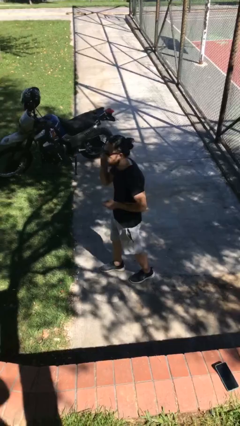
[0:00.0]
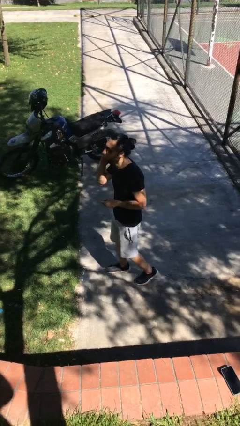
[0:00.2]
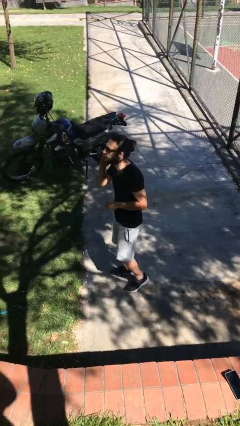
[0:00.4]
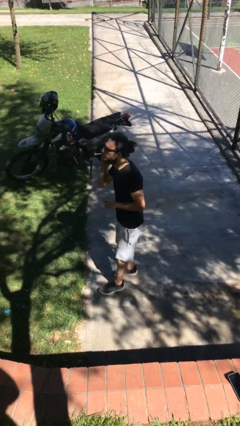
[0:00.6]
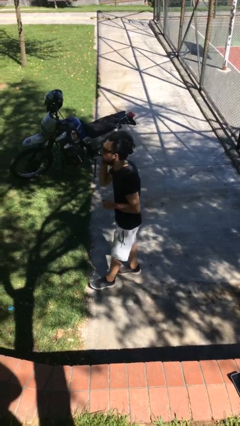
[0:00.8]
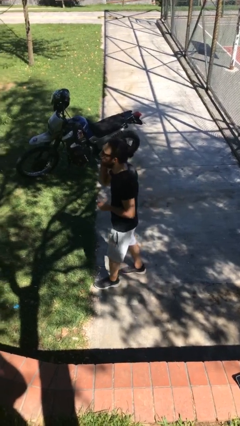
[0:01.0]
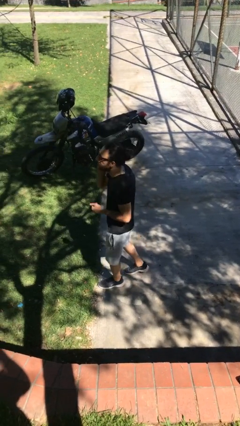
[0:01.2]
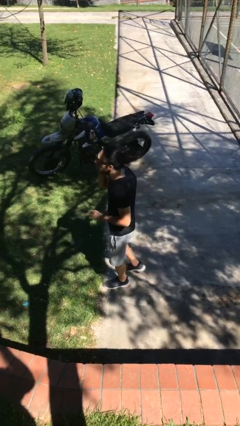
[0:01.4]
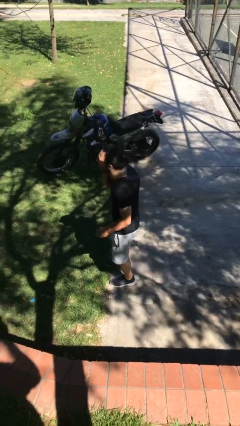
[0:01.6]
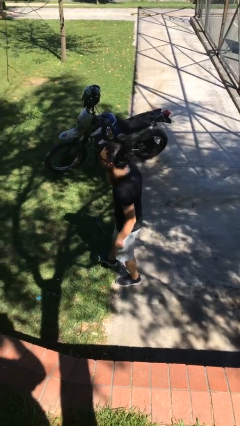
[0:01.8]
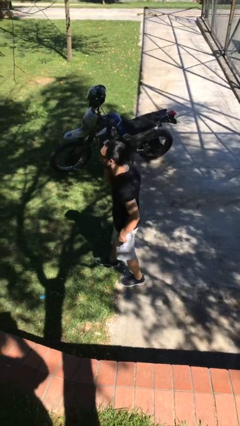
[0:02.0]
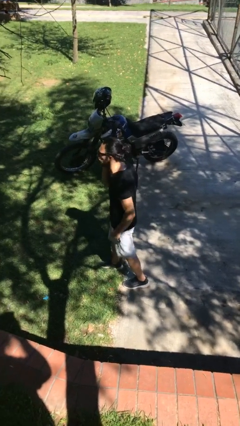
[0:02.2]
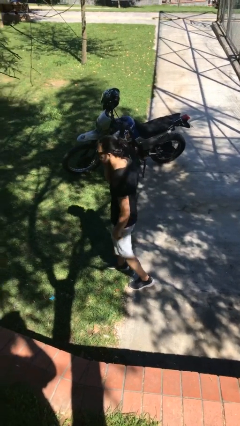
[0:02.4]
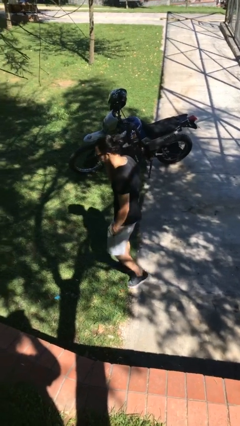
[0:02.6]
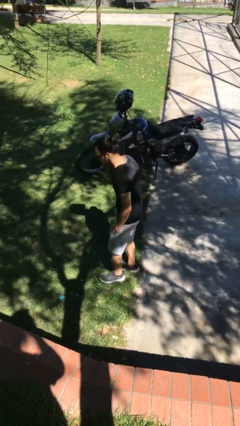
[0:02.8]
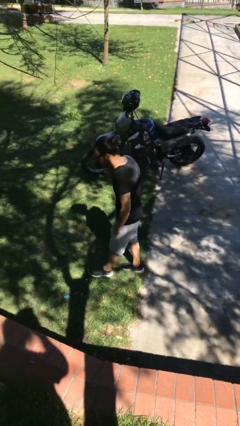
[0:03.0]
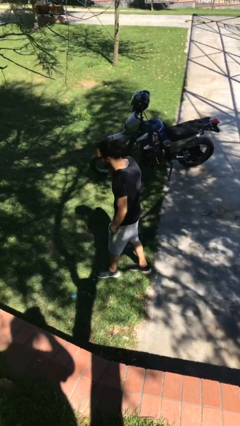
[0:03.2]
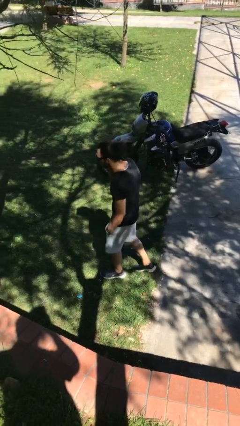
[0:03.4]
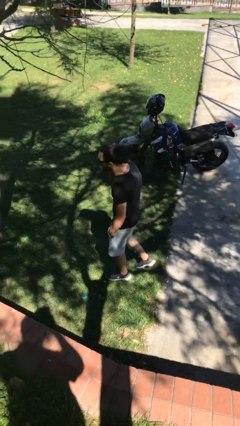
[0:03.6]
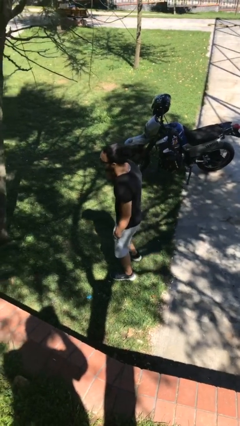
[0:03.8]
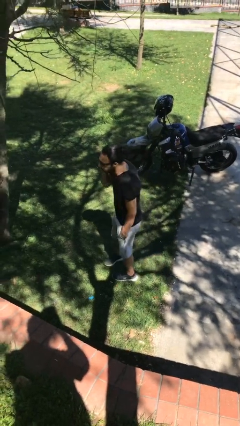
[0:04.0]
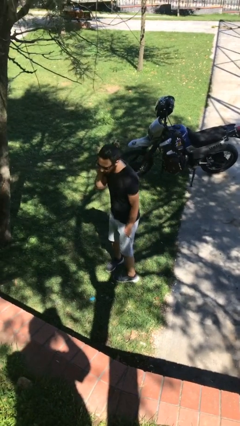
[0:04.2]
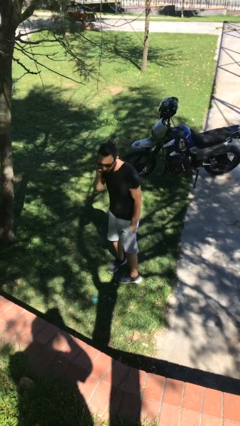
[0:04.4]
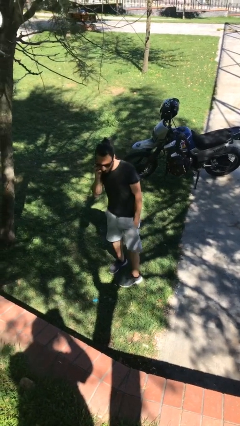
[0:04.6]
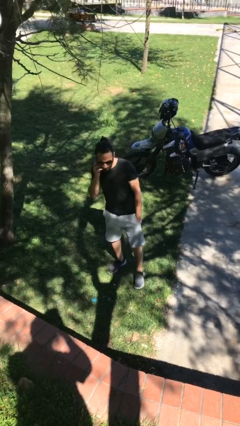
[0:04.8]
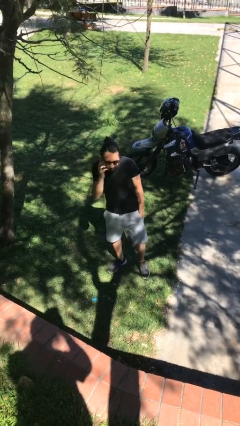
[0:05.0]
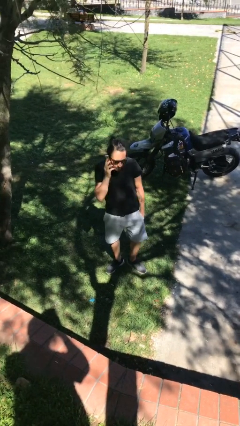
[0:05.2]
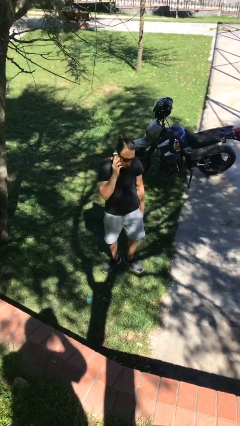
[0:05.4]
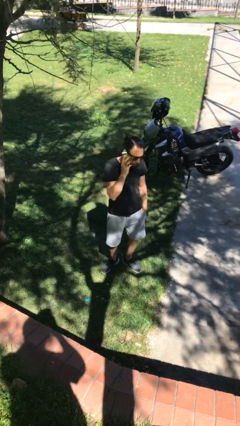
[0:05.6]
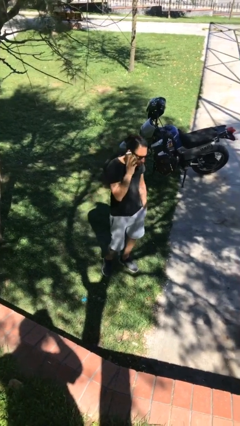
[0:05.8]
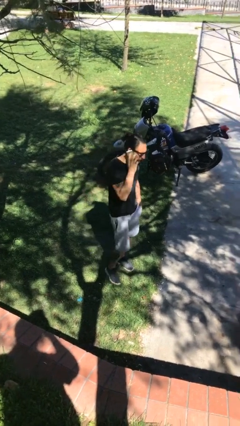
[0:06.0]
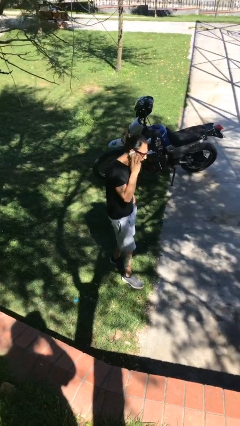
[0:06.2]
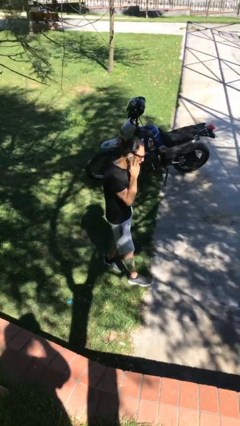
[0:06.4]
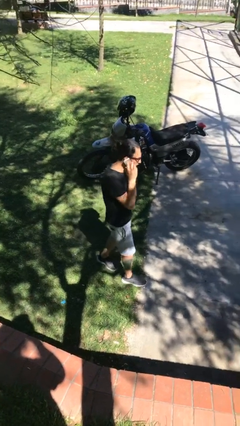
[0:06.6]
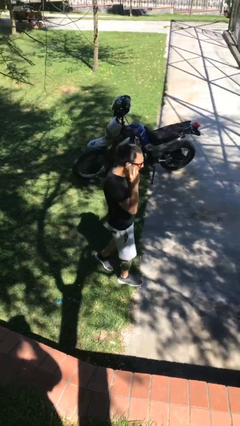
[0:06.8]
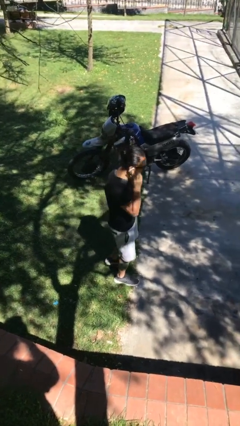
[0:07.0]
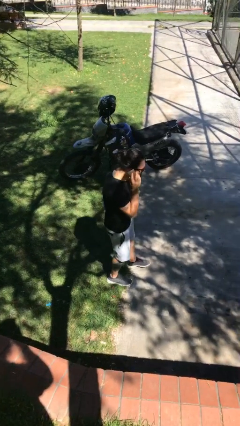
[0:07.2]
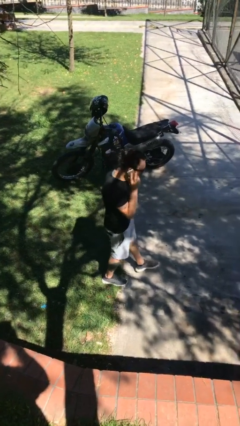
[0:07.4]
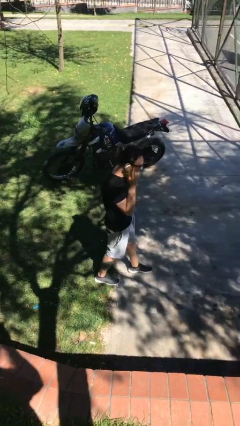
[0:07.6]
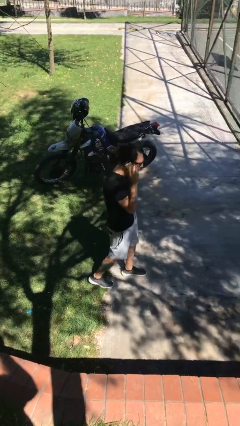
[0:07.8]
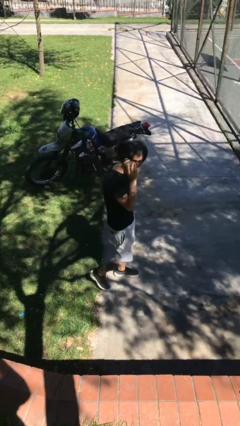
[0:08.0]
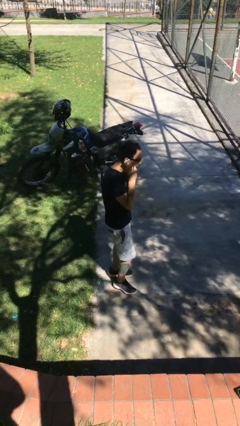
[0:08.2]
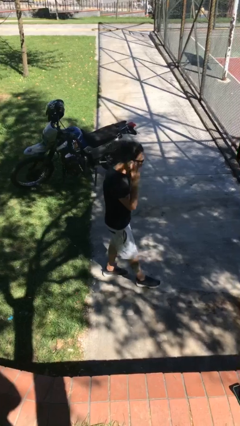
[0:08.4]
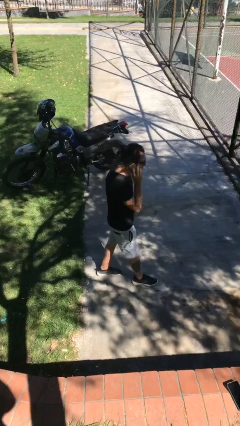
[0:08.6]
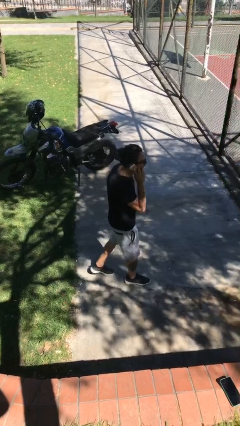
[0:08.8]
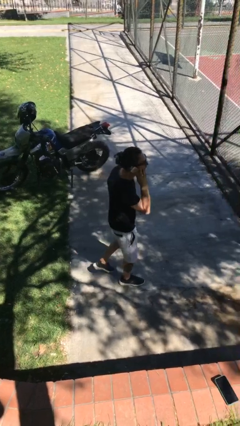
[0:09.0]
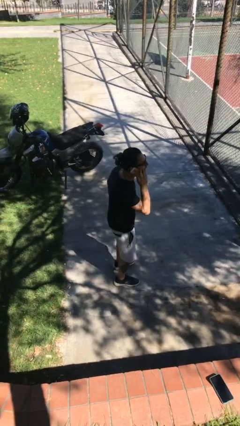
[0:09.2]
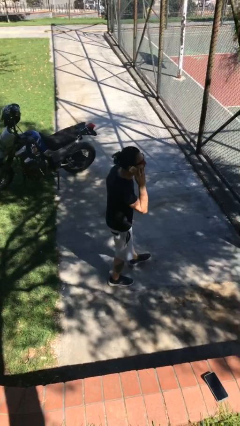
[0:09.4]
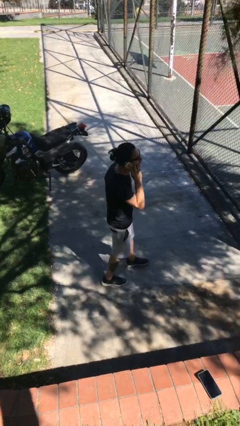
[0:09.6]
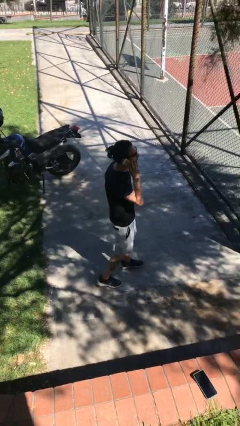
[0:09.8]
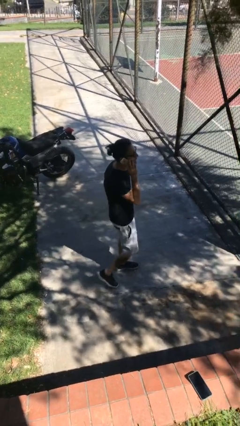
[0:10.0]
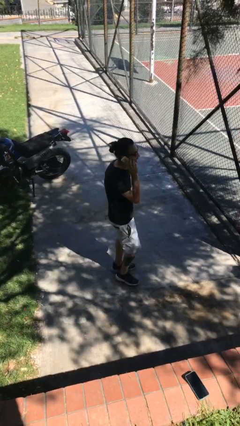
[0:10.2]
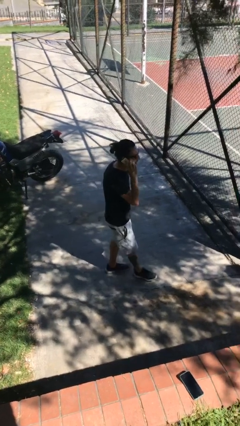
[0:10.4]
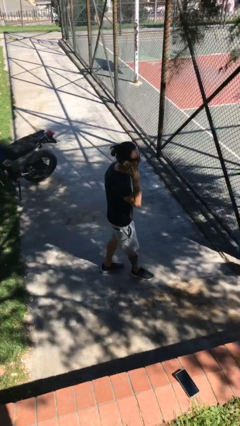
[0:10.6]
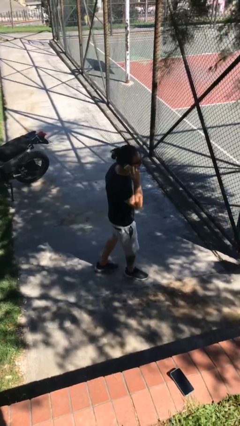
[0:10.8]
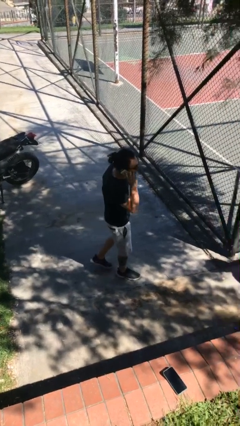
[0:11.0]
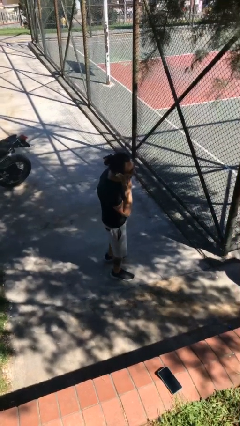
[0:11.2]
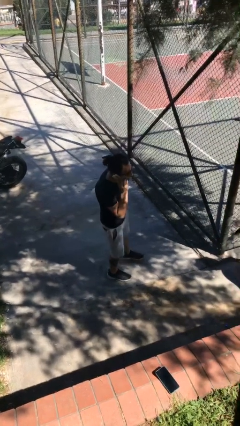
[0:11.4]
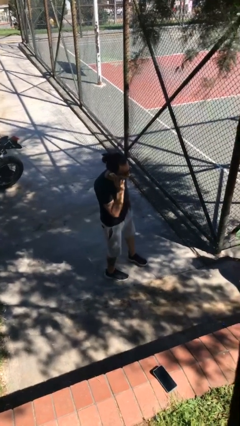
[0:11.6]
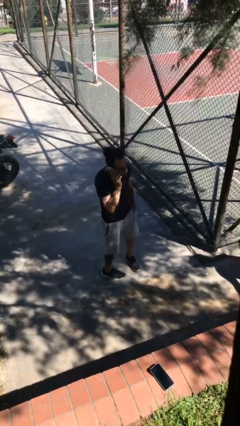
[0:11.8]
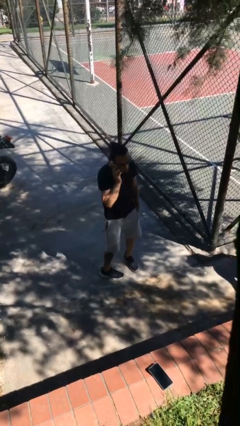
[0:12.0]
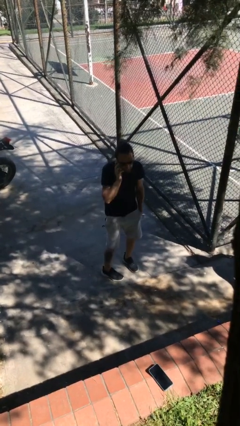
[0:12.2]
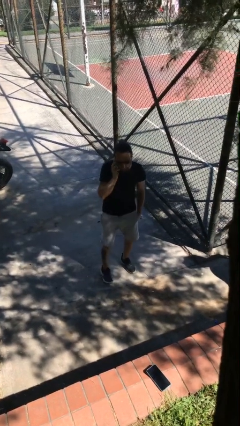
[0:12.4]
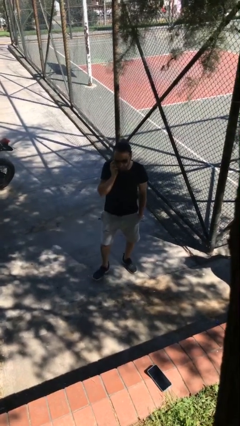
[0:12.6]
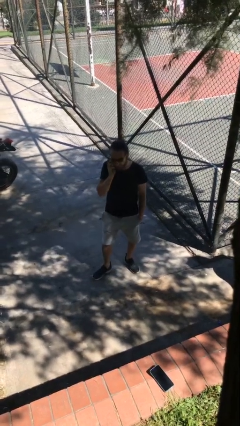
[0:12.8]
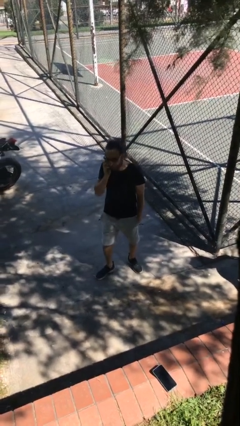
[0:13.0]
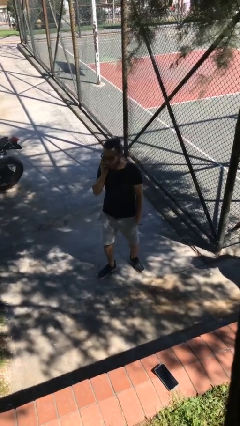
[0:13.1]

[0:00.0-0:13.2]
person talks on phone

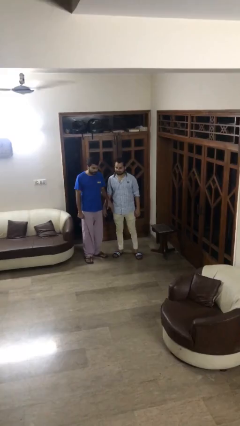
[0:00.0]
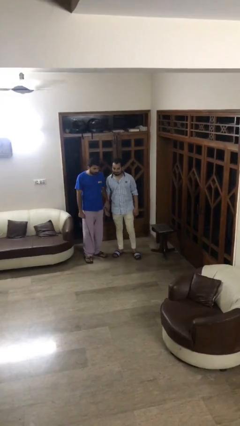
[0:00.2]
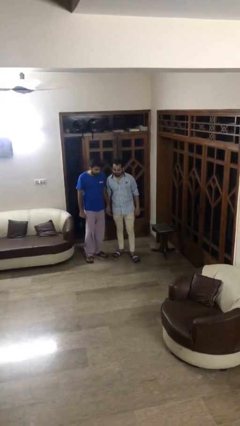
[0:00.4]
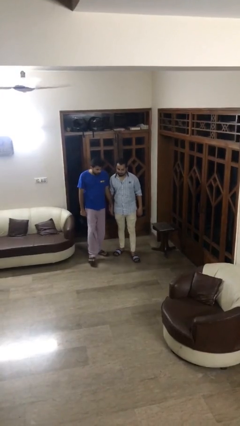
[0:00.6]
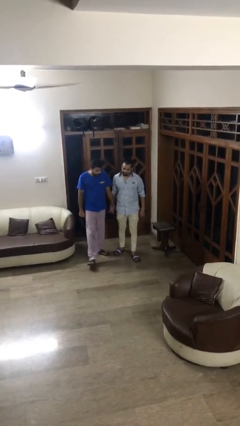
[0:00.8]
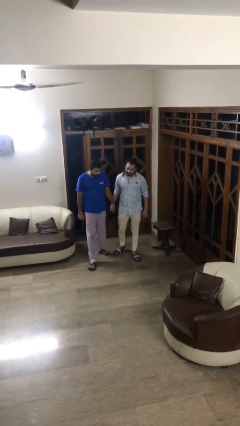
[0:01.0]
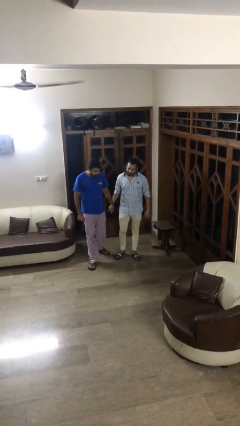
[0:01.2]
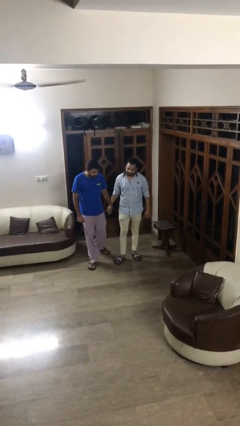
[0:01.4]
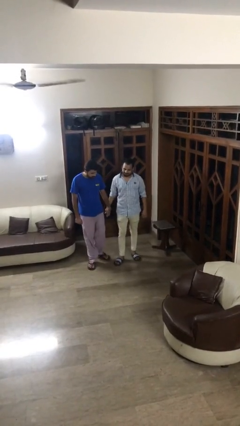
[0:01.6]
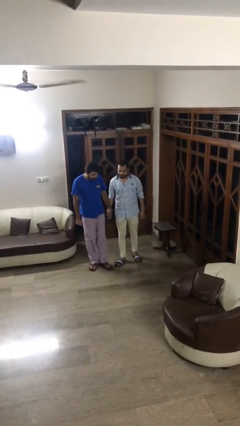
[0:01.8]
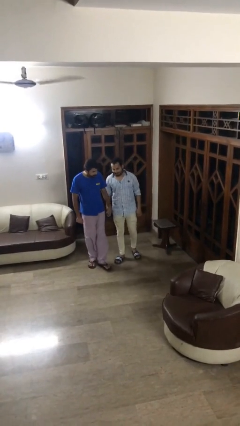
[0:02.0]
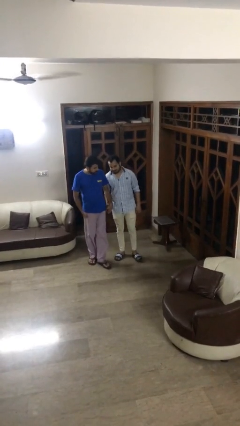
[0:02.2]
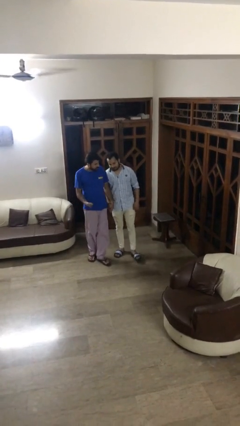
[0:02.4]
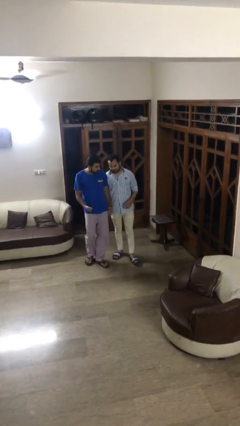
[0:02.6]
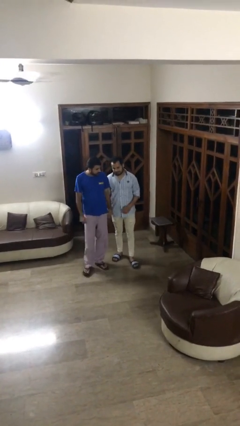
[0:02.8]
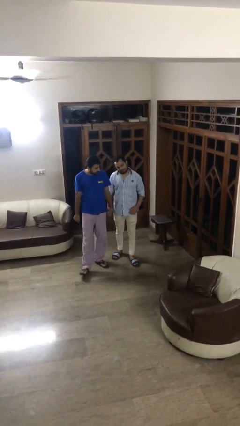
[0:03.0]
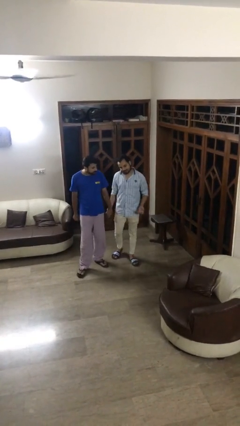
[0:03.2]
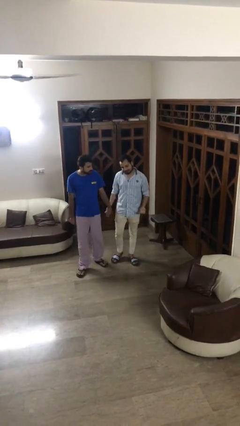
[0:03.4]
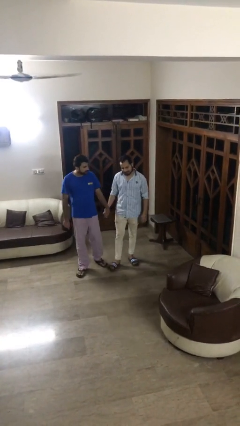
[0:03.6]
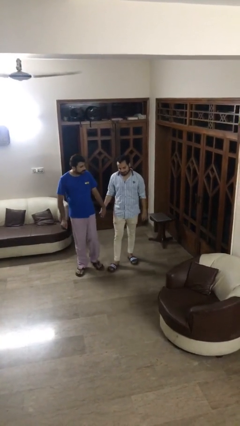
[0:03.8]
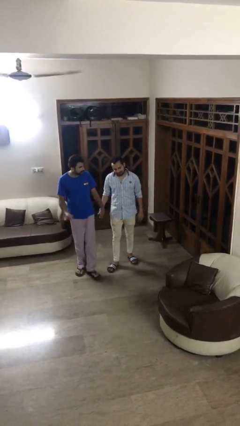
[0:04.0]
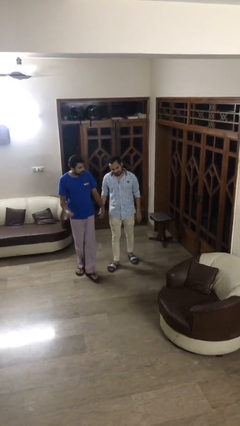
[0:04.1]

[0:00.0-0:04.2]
person holds hand

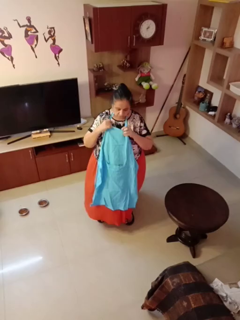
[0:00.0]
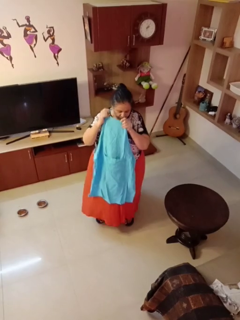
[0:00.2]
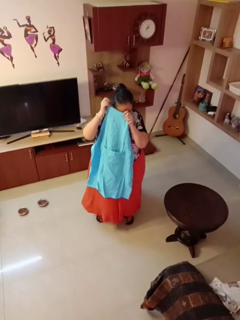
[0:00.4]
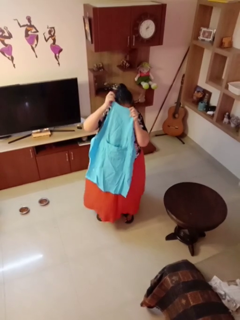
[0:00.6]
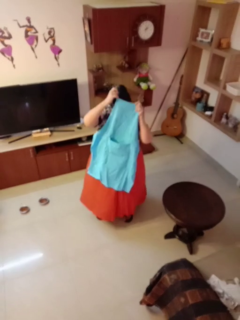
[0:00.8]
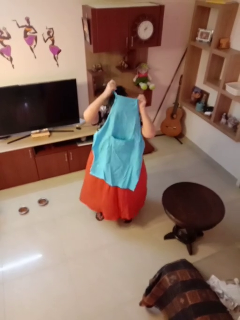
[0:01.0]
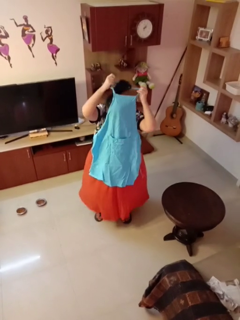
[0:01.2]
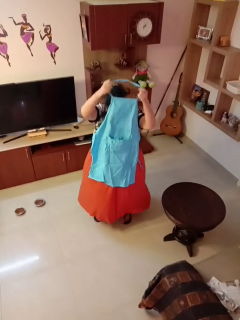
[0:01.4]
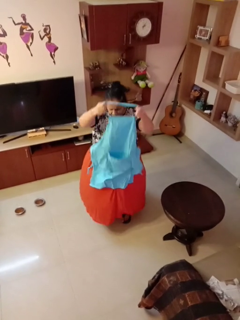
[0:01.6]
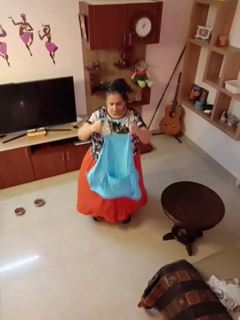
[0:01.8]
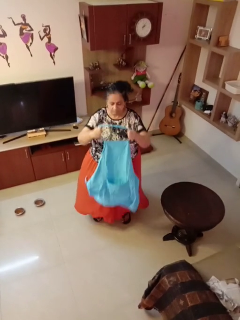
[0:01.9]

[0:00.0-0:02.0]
person takes off apron
